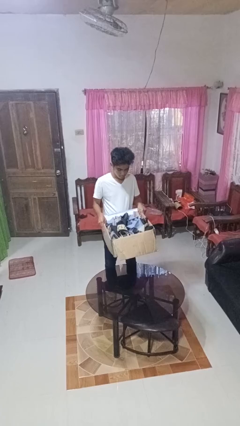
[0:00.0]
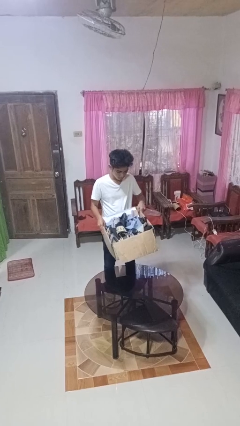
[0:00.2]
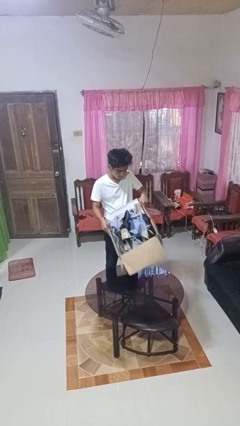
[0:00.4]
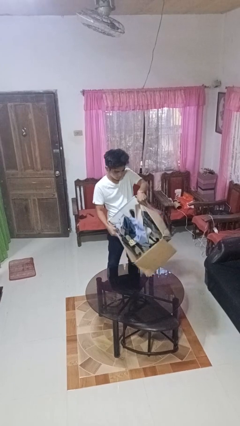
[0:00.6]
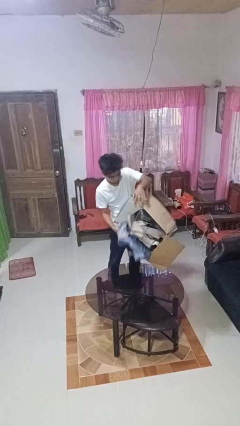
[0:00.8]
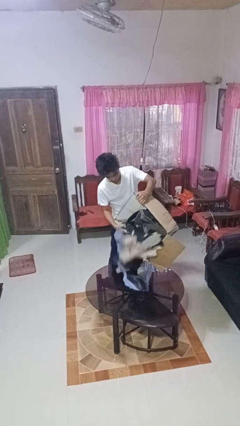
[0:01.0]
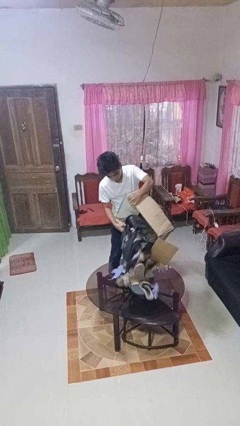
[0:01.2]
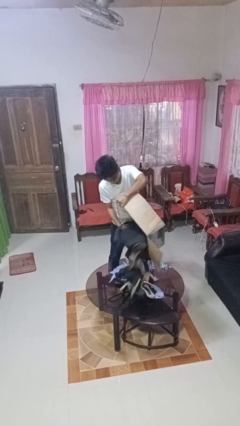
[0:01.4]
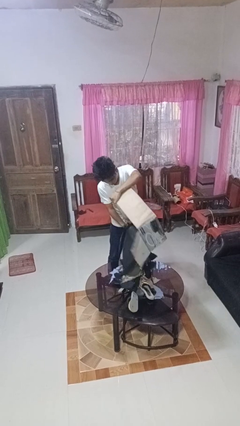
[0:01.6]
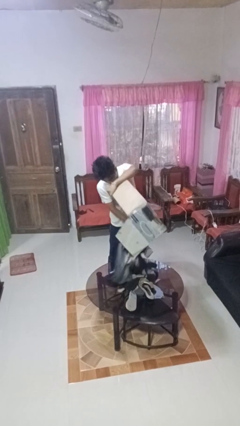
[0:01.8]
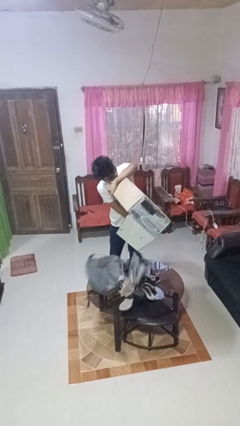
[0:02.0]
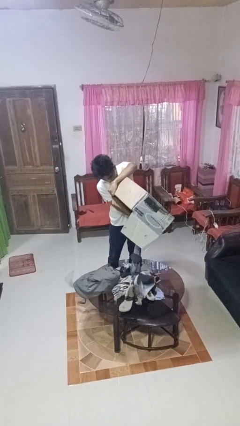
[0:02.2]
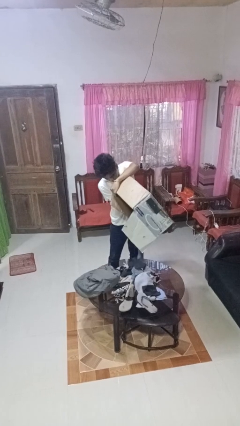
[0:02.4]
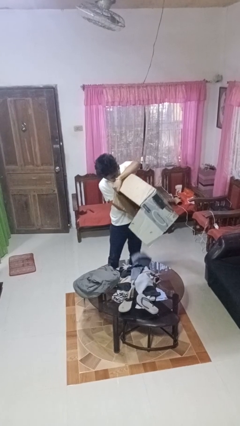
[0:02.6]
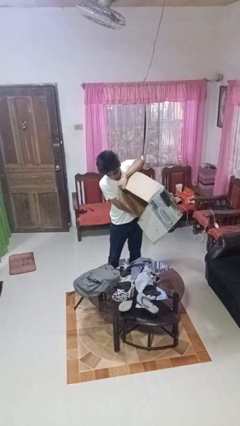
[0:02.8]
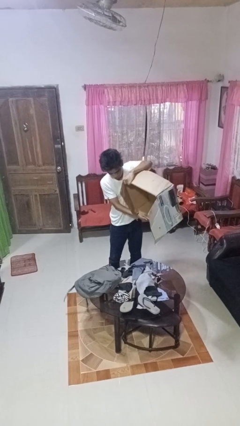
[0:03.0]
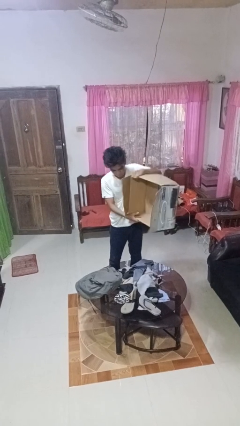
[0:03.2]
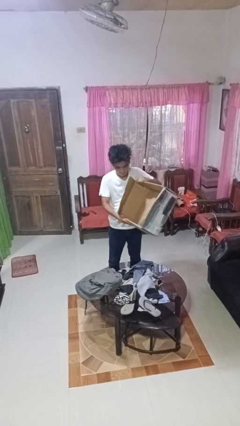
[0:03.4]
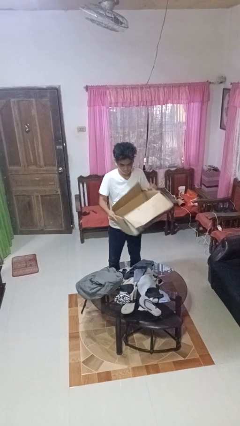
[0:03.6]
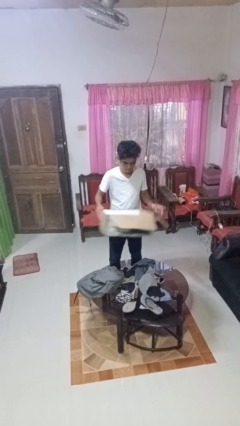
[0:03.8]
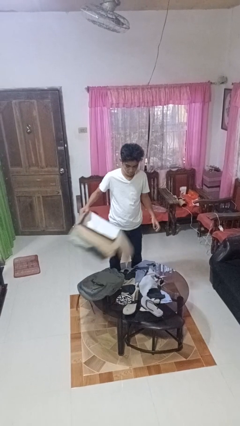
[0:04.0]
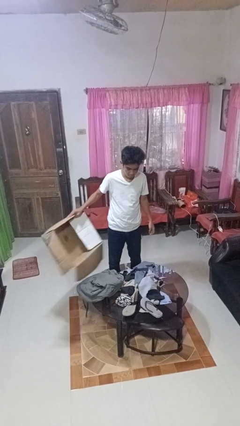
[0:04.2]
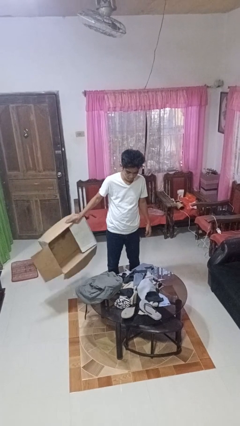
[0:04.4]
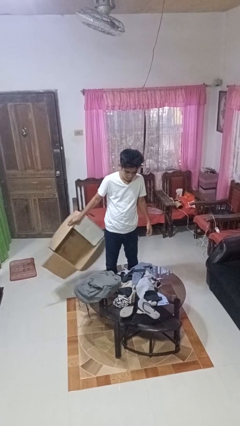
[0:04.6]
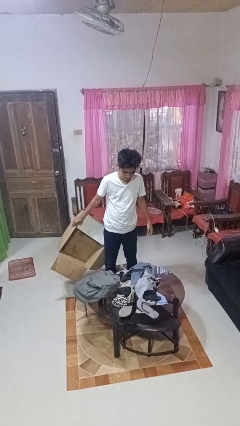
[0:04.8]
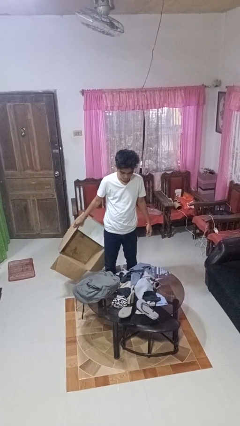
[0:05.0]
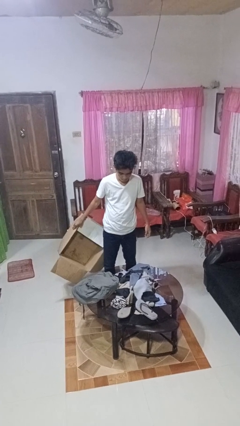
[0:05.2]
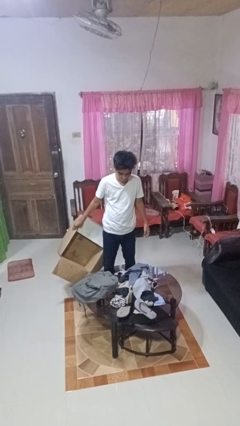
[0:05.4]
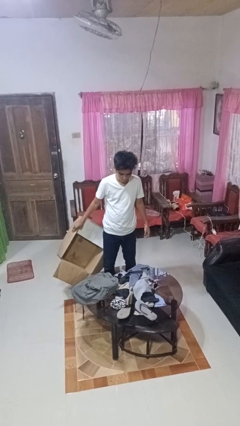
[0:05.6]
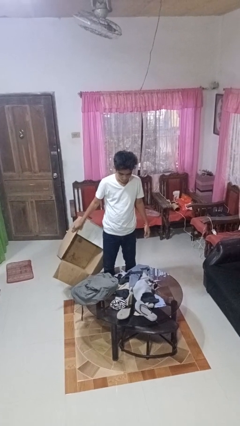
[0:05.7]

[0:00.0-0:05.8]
person unloads box onto table

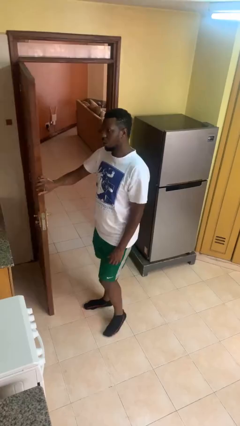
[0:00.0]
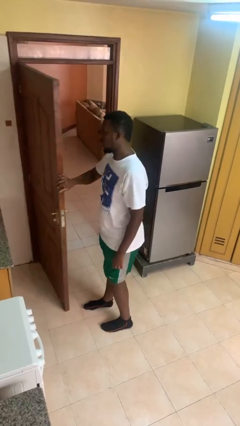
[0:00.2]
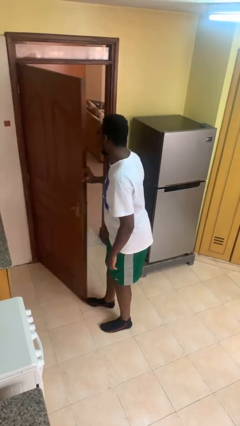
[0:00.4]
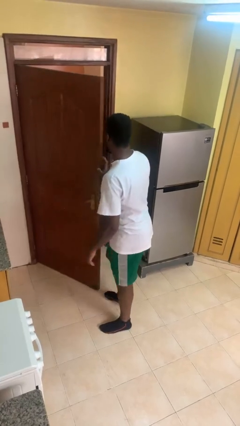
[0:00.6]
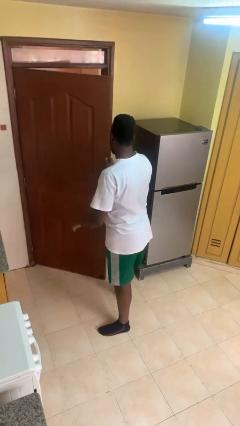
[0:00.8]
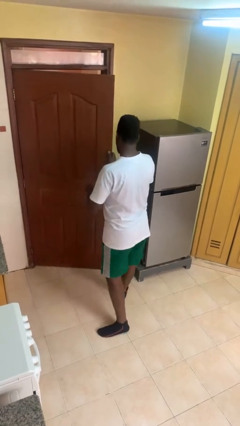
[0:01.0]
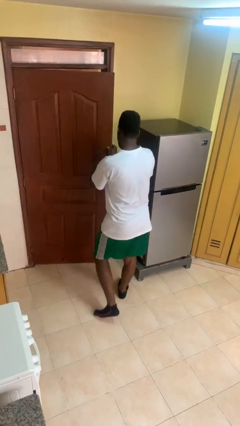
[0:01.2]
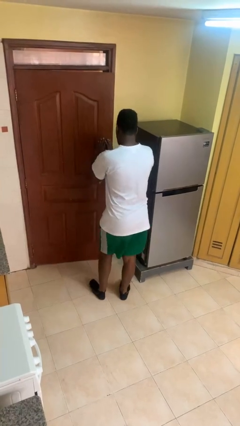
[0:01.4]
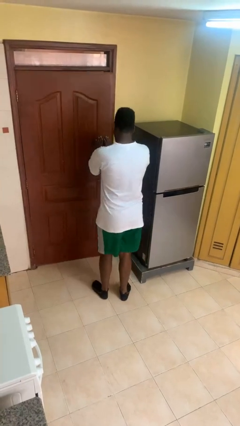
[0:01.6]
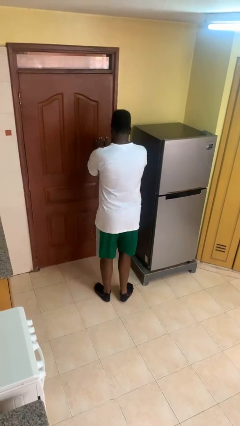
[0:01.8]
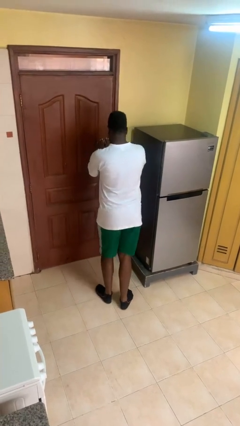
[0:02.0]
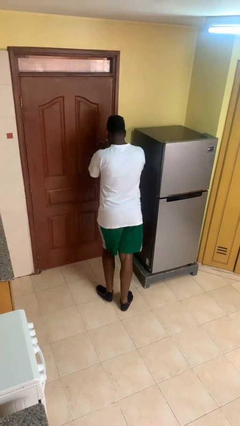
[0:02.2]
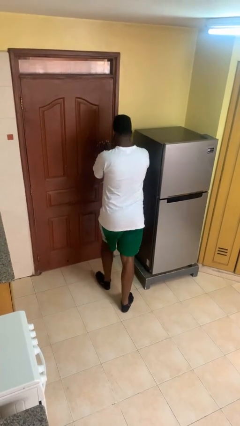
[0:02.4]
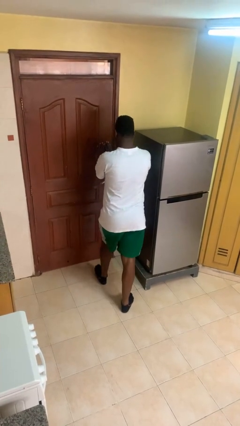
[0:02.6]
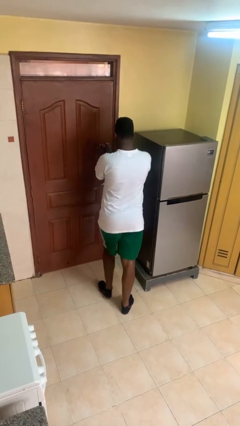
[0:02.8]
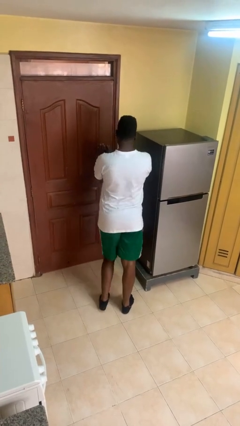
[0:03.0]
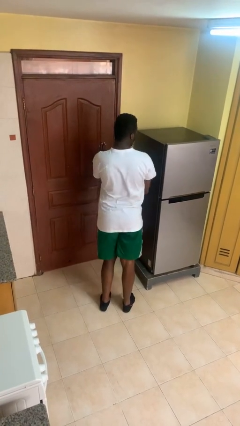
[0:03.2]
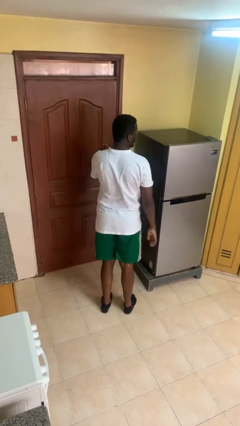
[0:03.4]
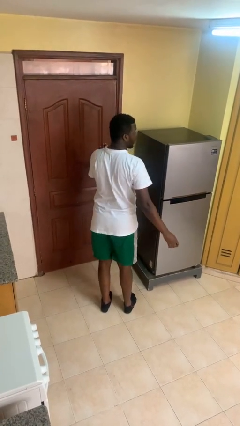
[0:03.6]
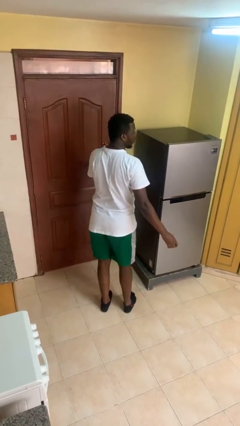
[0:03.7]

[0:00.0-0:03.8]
person closes facility door

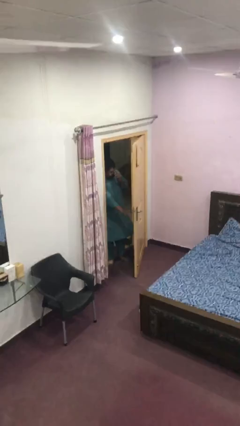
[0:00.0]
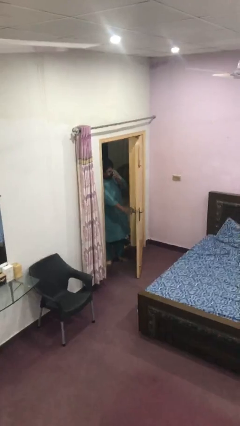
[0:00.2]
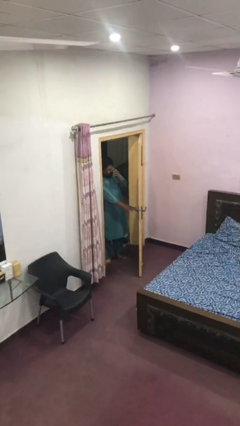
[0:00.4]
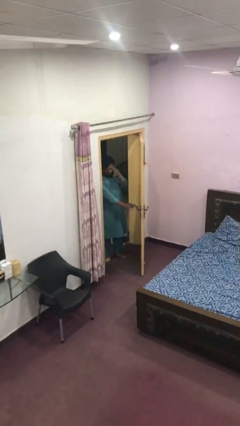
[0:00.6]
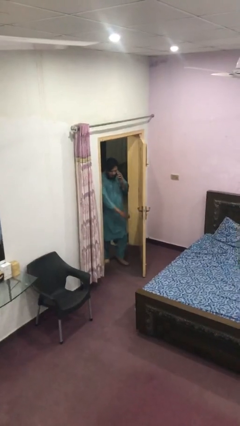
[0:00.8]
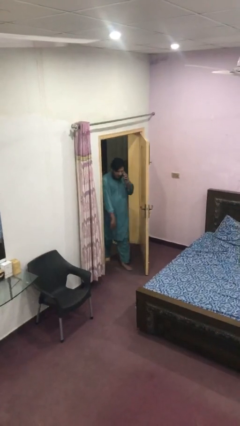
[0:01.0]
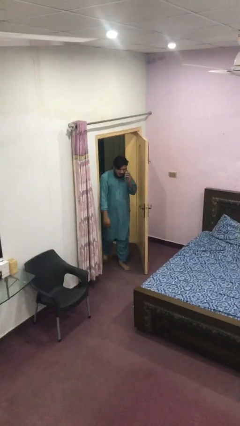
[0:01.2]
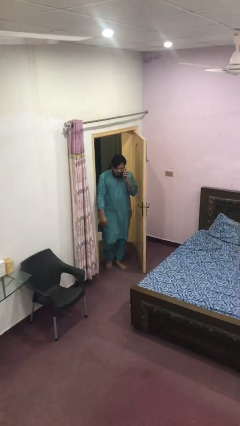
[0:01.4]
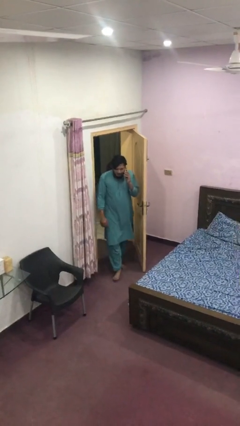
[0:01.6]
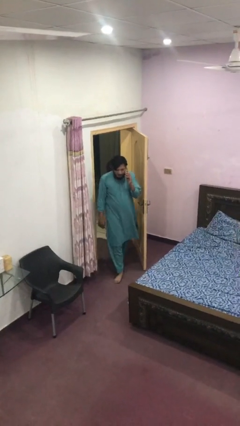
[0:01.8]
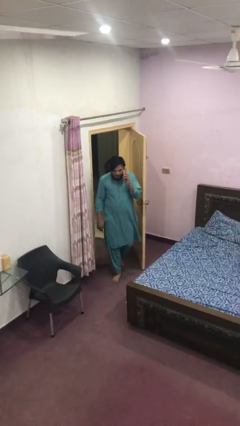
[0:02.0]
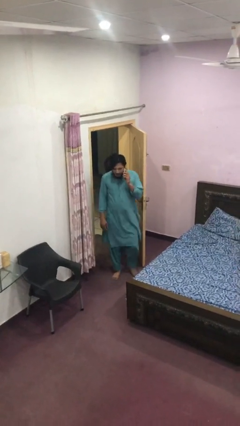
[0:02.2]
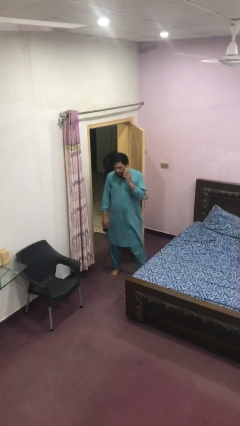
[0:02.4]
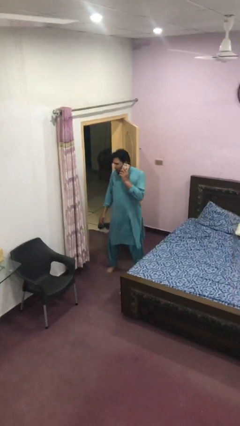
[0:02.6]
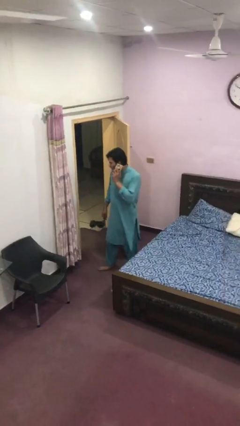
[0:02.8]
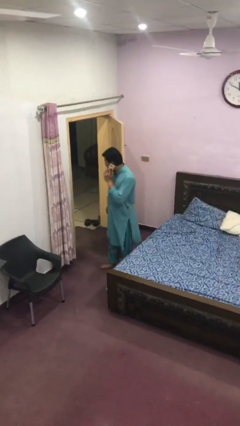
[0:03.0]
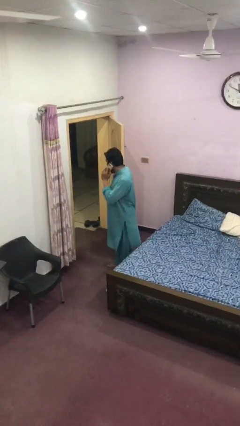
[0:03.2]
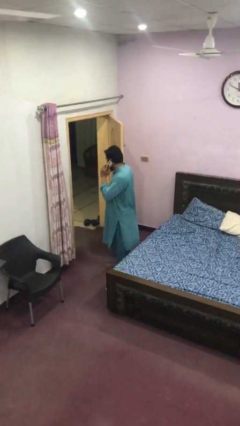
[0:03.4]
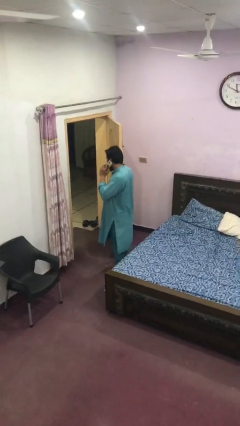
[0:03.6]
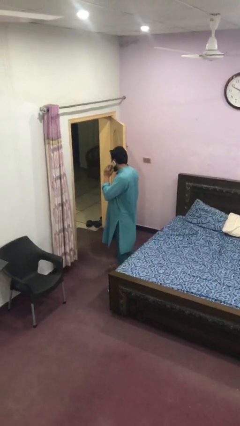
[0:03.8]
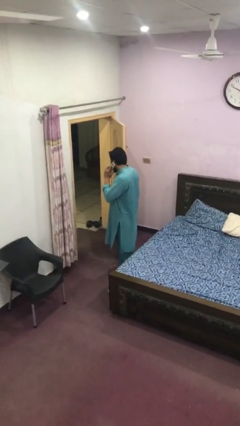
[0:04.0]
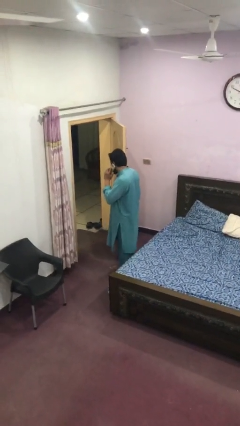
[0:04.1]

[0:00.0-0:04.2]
person enters scene through structure

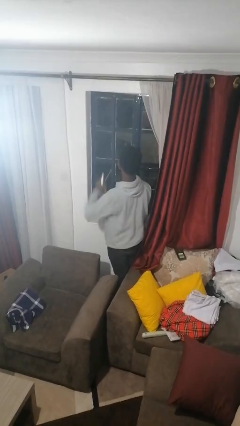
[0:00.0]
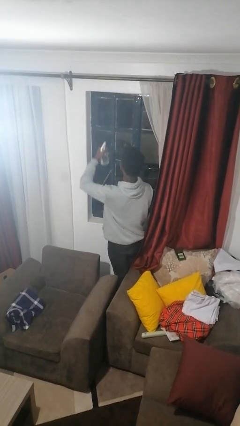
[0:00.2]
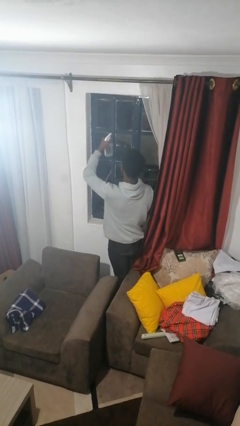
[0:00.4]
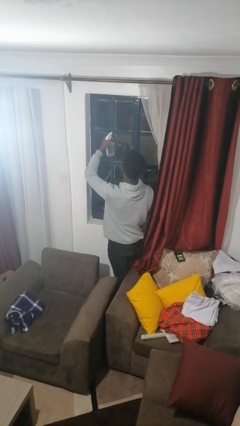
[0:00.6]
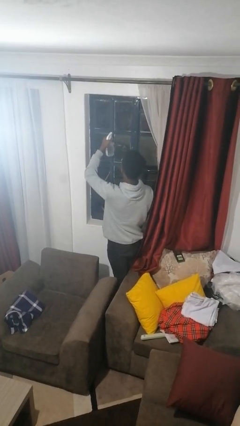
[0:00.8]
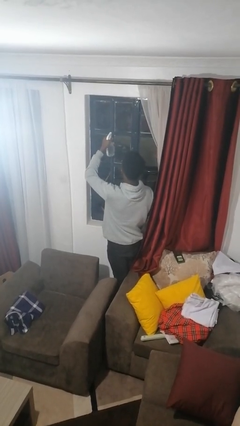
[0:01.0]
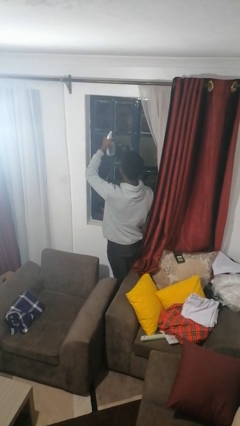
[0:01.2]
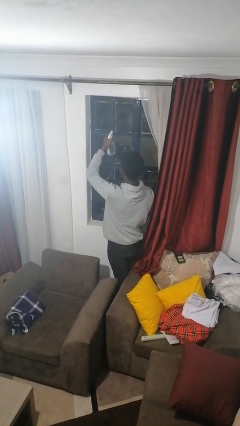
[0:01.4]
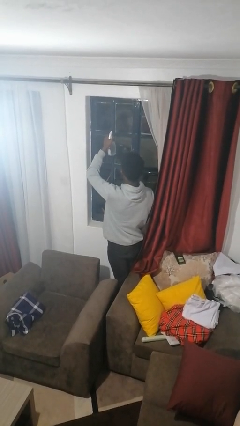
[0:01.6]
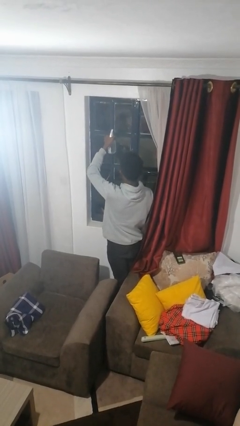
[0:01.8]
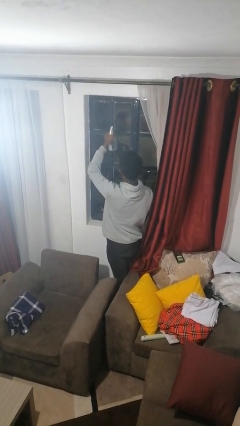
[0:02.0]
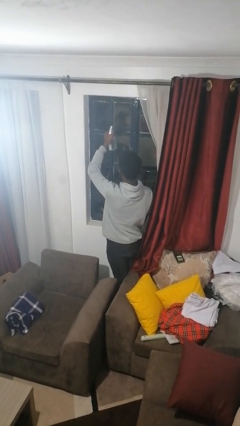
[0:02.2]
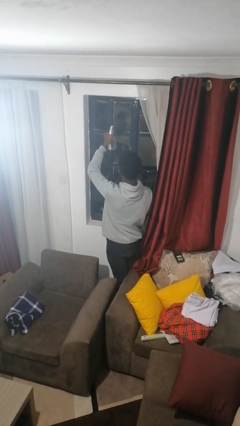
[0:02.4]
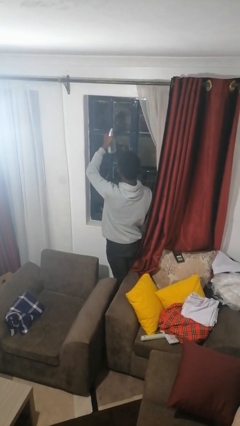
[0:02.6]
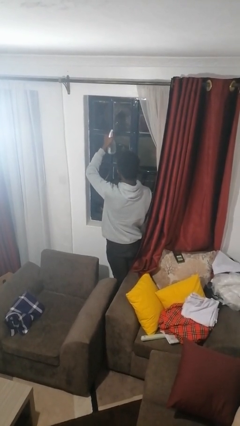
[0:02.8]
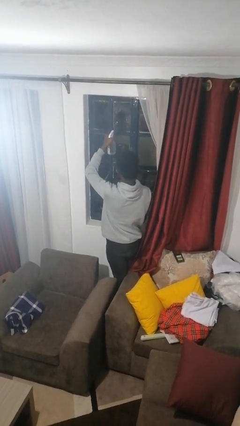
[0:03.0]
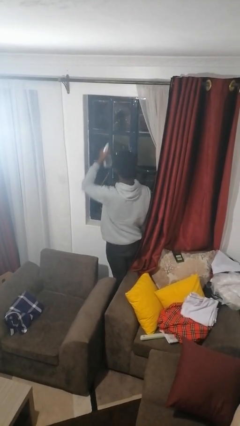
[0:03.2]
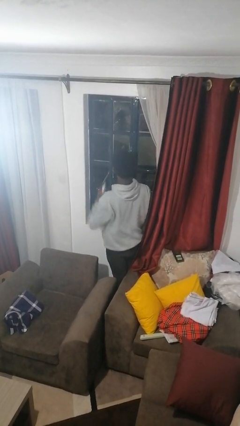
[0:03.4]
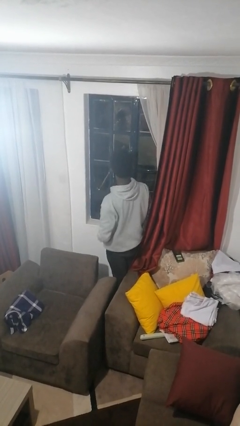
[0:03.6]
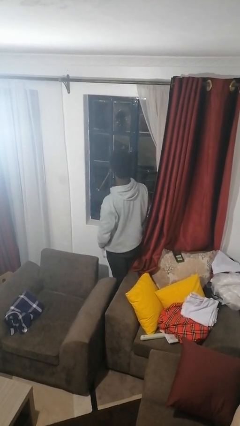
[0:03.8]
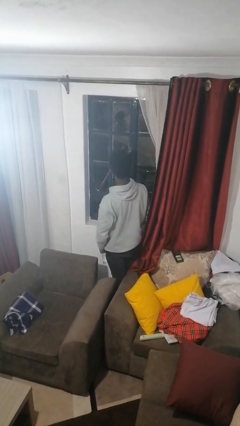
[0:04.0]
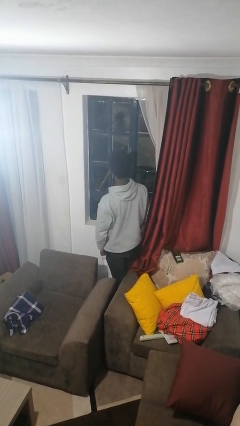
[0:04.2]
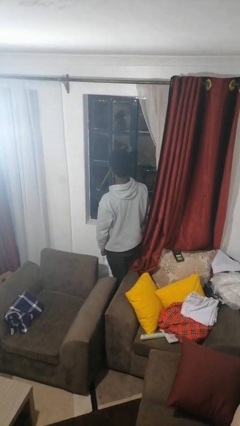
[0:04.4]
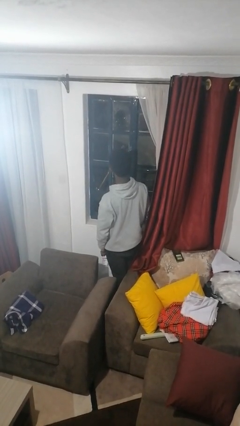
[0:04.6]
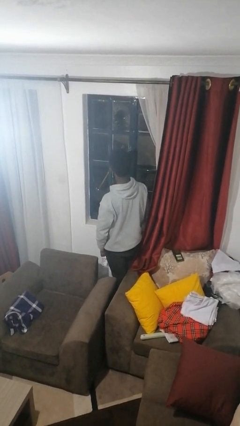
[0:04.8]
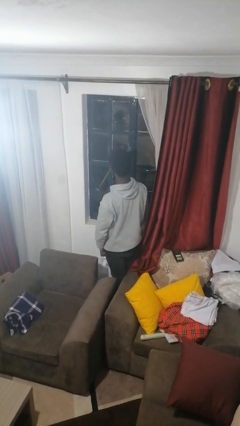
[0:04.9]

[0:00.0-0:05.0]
person sprays from bottle
